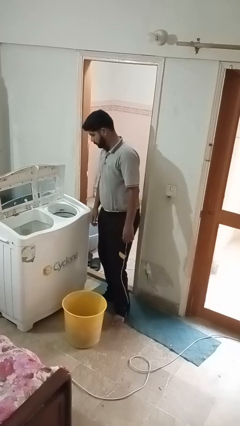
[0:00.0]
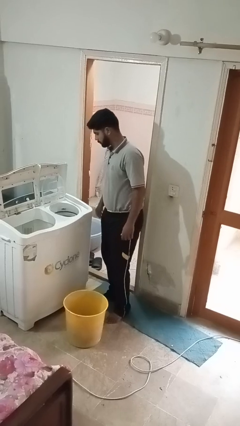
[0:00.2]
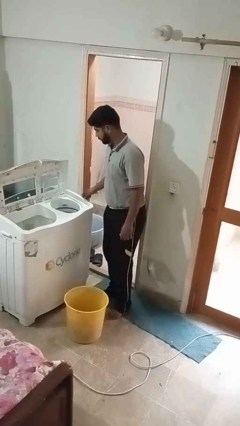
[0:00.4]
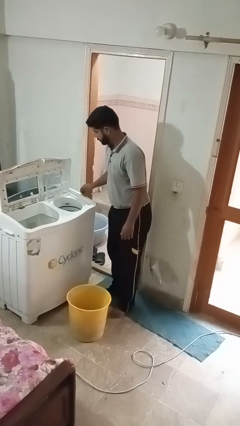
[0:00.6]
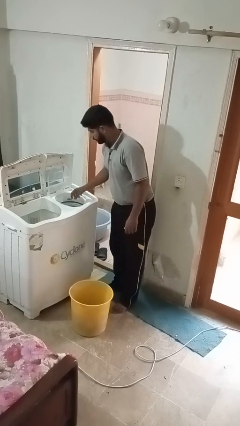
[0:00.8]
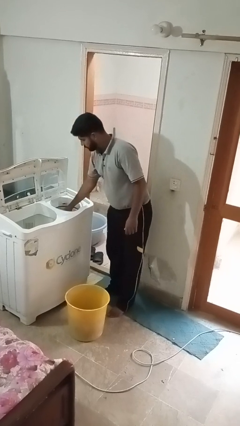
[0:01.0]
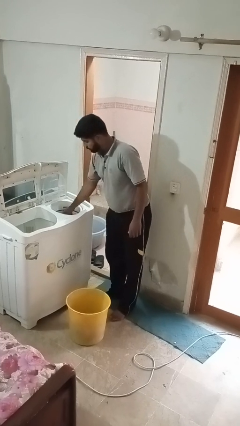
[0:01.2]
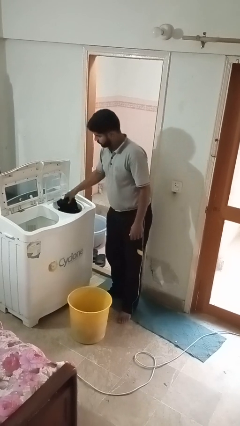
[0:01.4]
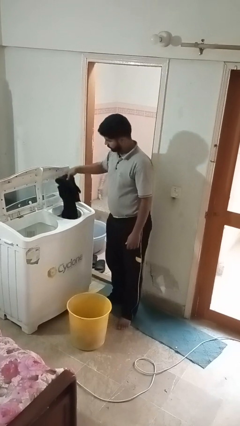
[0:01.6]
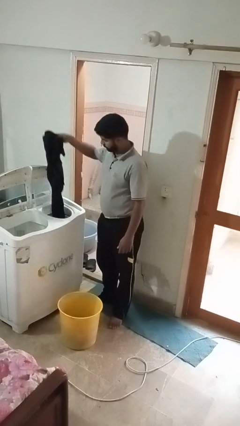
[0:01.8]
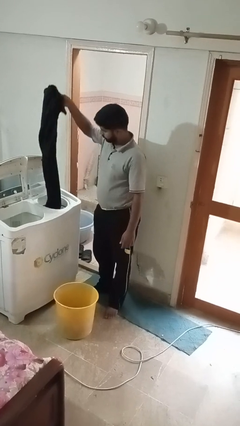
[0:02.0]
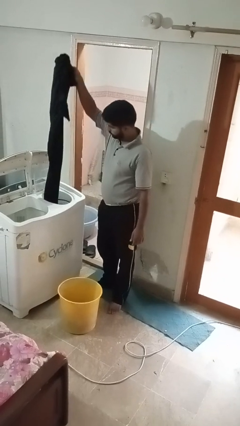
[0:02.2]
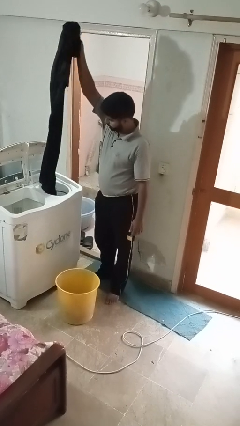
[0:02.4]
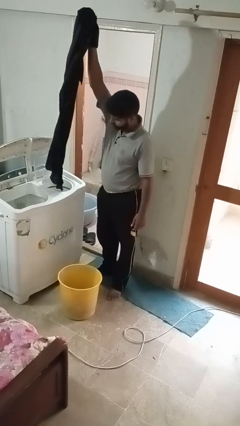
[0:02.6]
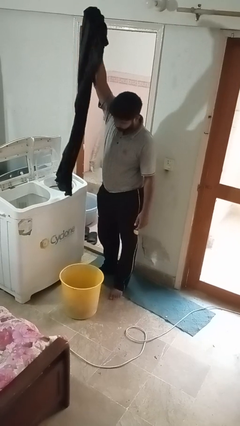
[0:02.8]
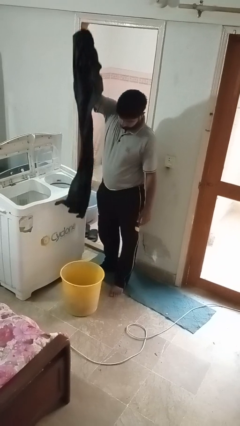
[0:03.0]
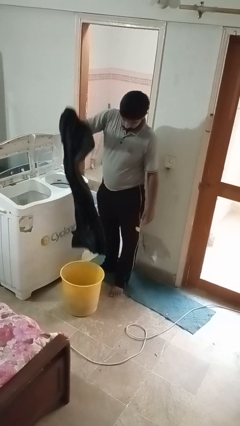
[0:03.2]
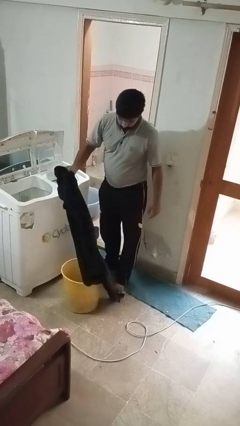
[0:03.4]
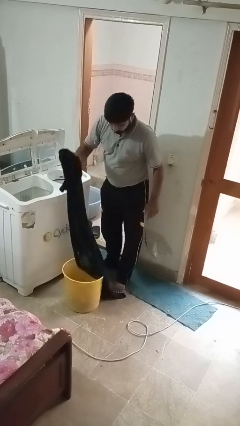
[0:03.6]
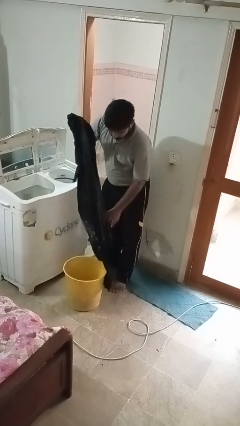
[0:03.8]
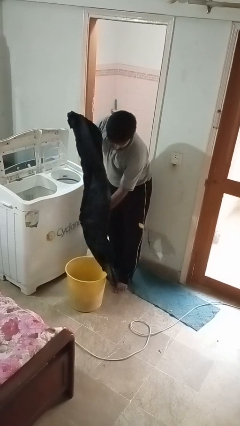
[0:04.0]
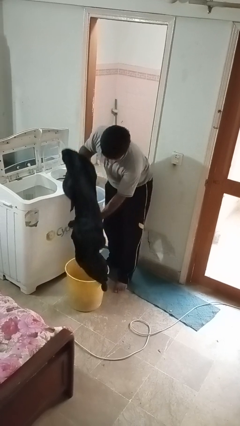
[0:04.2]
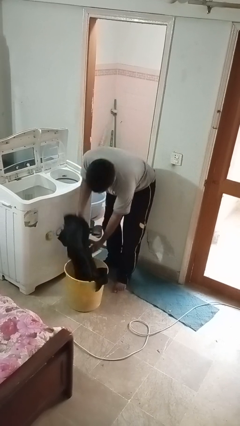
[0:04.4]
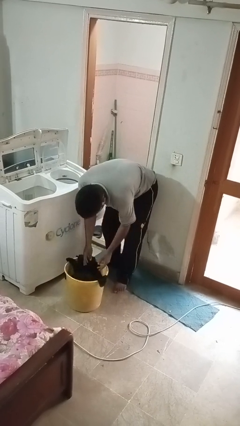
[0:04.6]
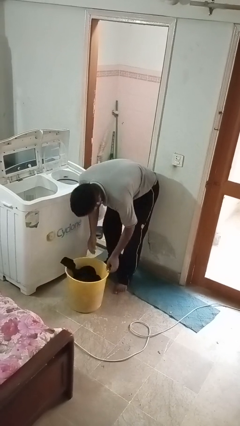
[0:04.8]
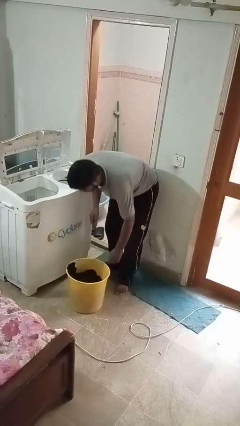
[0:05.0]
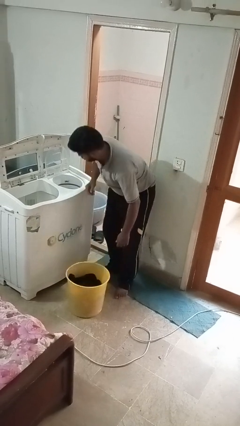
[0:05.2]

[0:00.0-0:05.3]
person unloads dryer

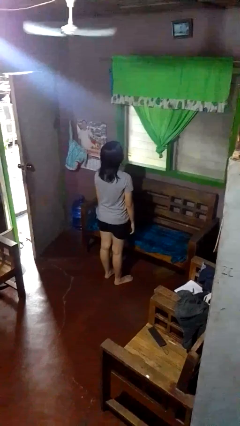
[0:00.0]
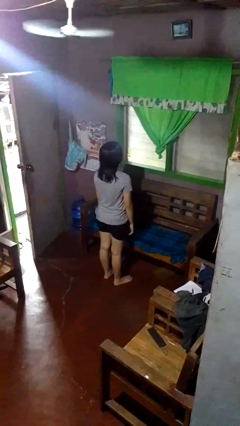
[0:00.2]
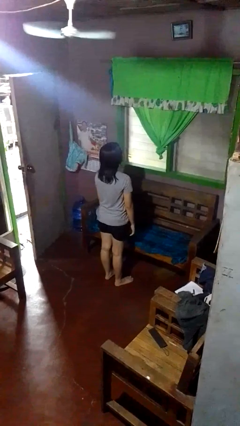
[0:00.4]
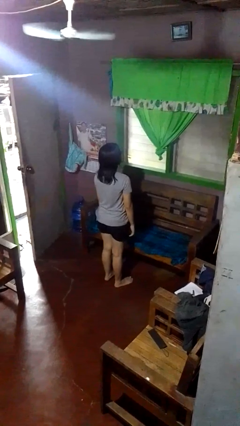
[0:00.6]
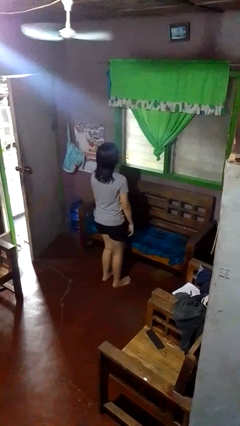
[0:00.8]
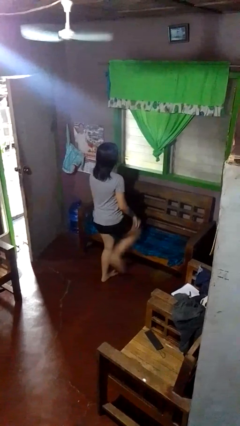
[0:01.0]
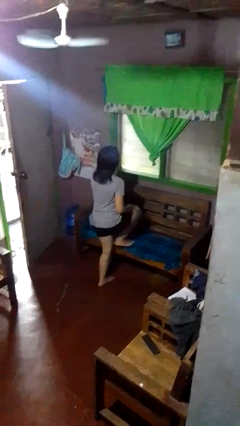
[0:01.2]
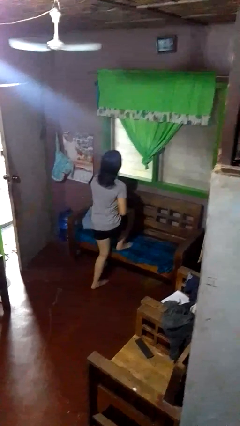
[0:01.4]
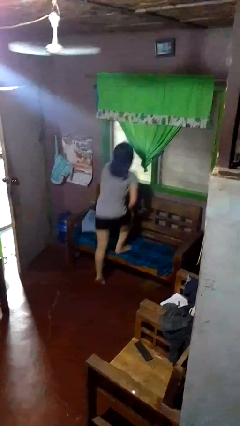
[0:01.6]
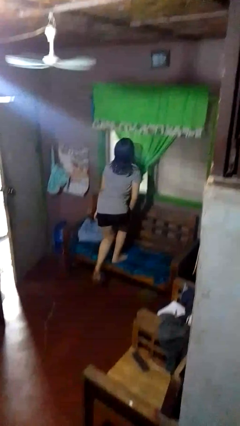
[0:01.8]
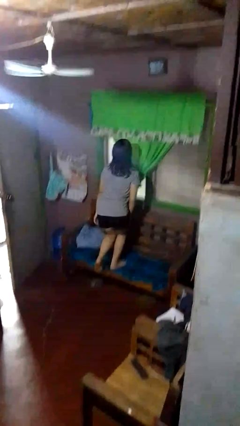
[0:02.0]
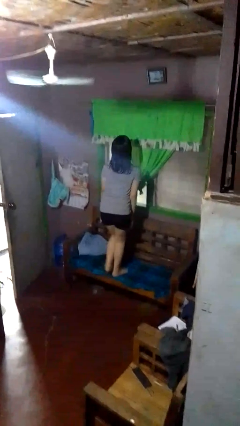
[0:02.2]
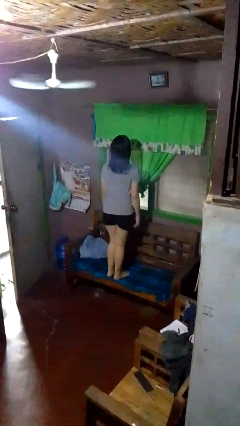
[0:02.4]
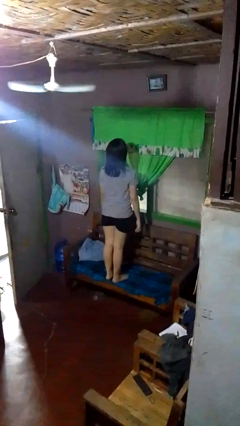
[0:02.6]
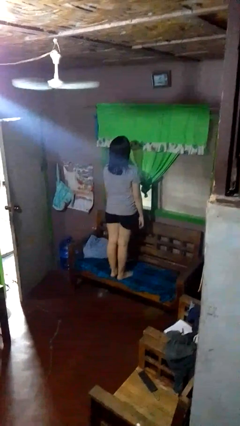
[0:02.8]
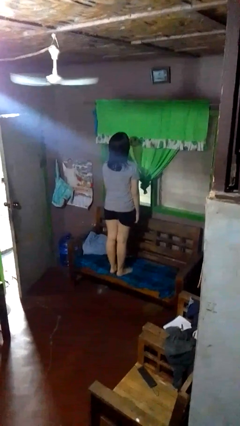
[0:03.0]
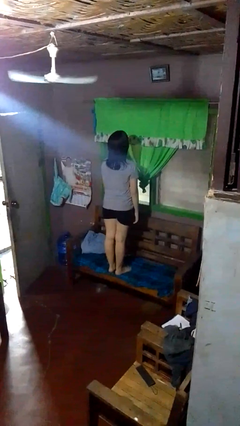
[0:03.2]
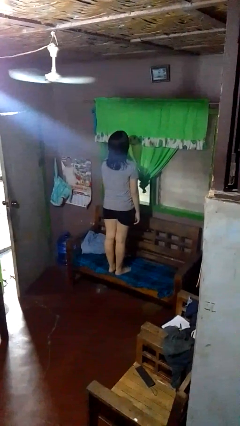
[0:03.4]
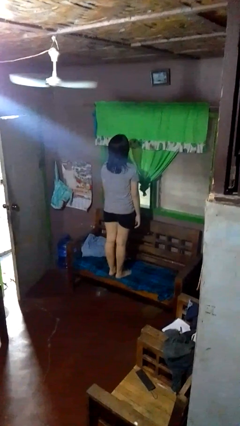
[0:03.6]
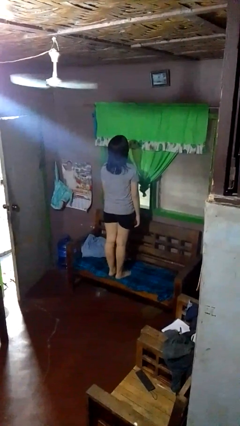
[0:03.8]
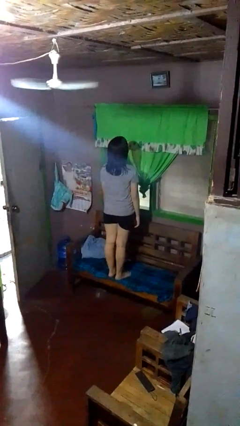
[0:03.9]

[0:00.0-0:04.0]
person climbs on couch

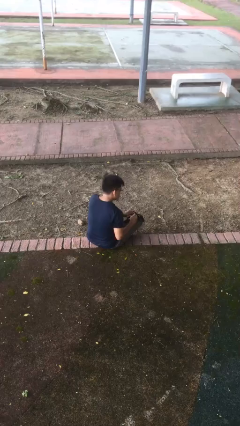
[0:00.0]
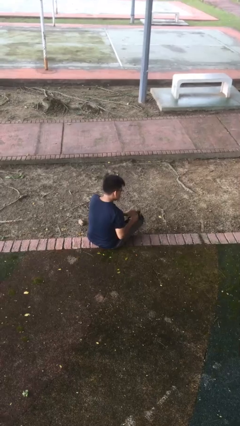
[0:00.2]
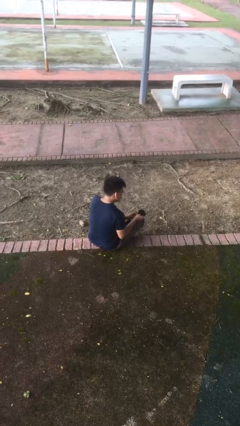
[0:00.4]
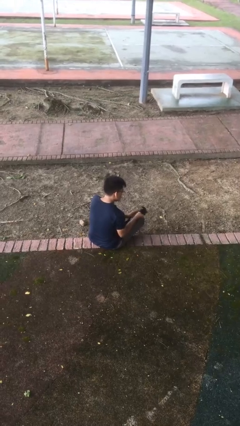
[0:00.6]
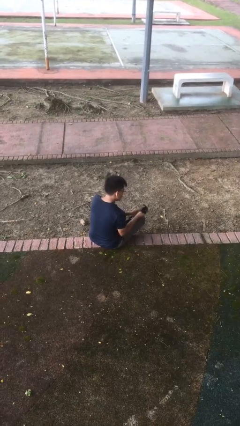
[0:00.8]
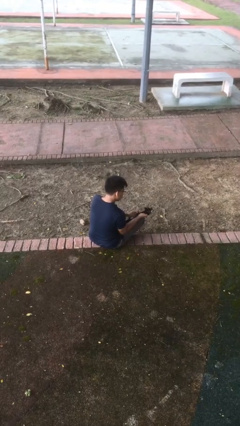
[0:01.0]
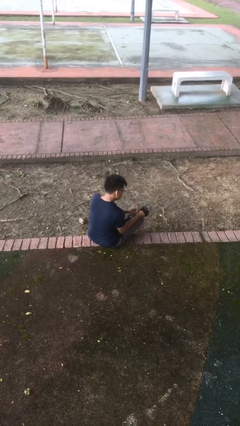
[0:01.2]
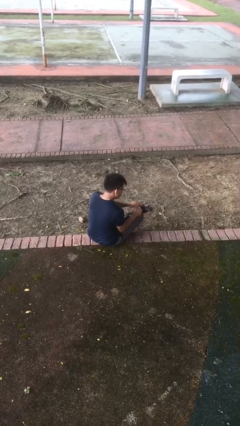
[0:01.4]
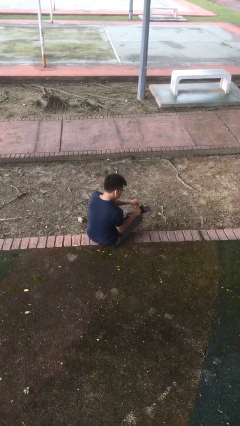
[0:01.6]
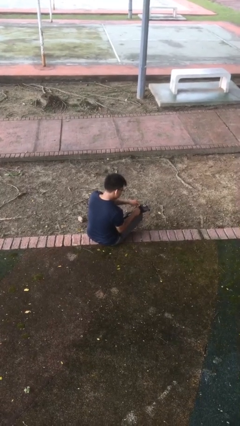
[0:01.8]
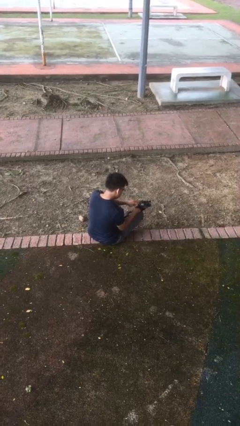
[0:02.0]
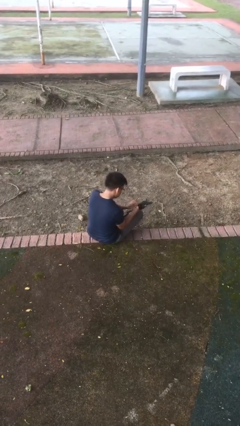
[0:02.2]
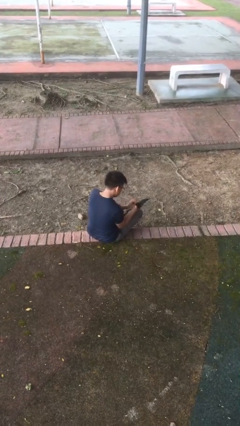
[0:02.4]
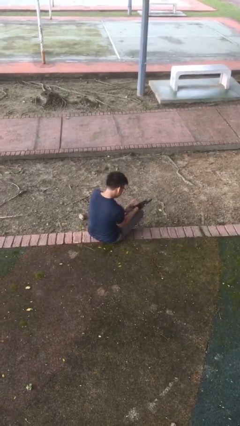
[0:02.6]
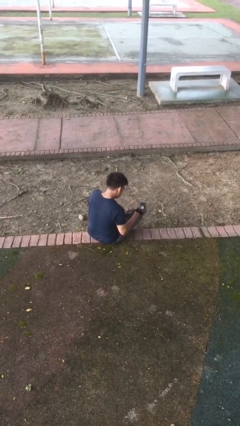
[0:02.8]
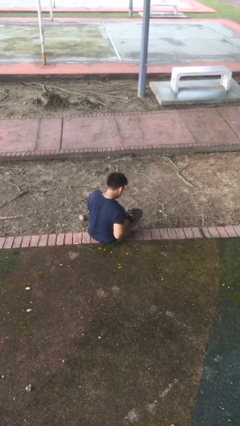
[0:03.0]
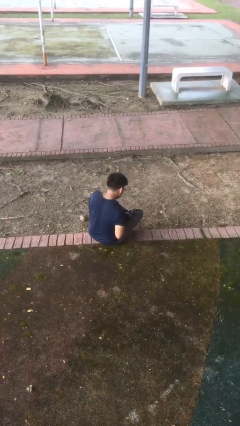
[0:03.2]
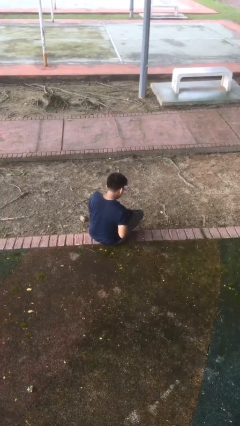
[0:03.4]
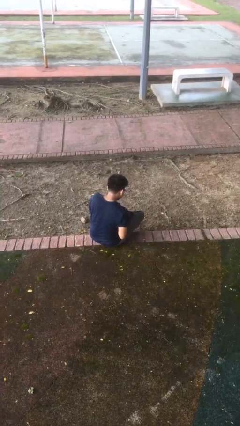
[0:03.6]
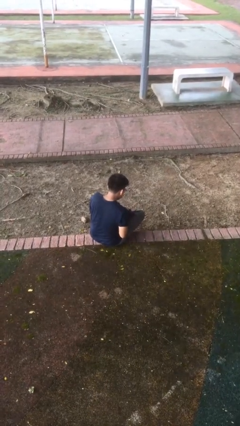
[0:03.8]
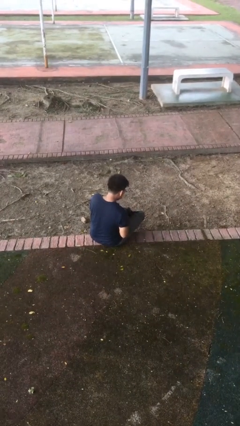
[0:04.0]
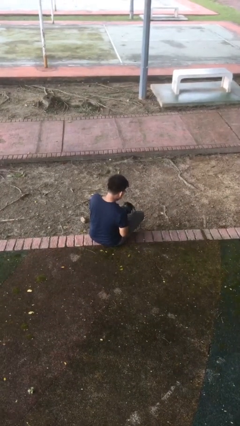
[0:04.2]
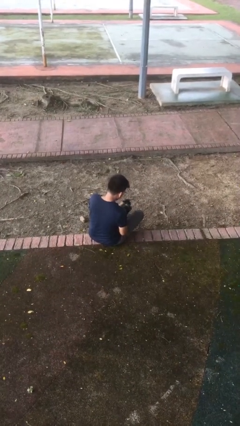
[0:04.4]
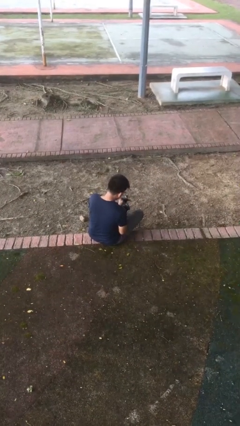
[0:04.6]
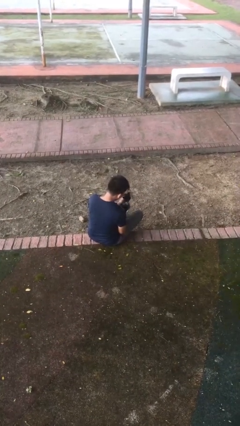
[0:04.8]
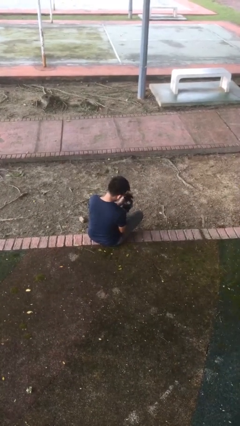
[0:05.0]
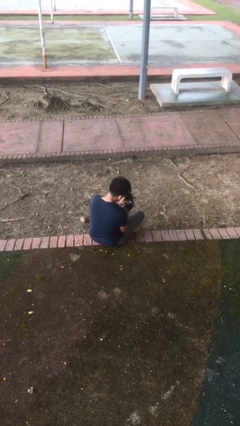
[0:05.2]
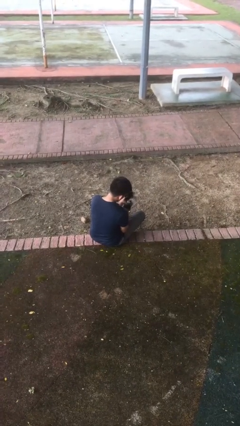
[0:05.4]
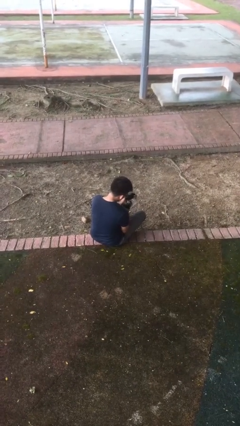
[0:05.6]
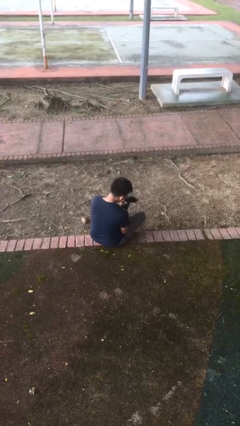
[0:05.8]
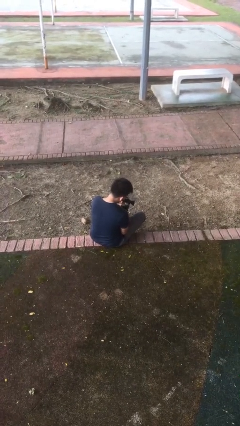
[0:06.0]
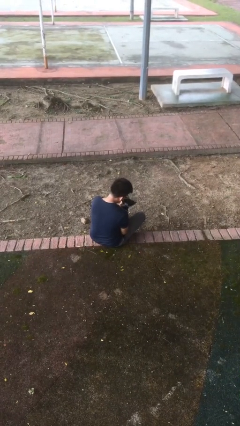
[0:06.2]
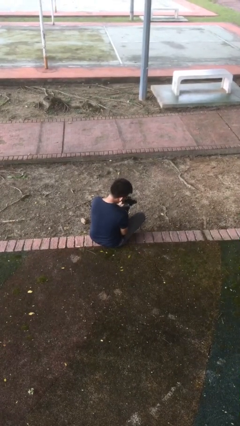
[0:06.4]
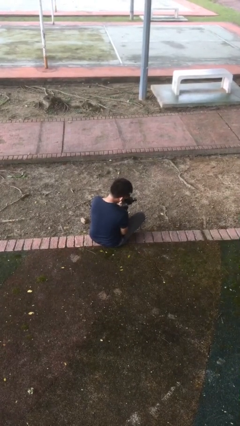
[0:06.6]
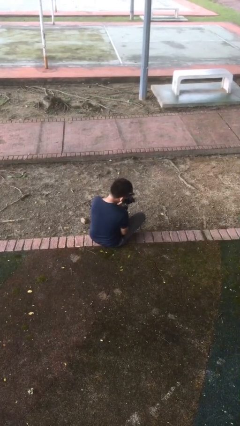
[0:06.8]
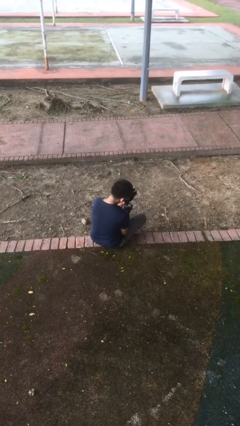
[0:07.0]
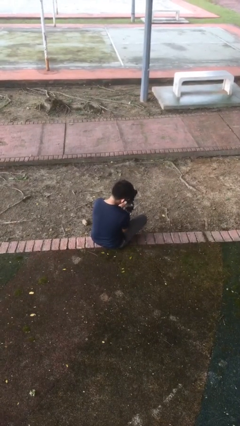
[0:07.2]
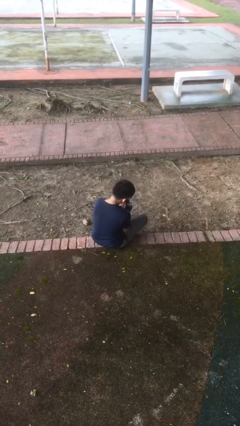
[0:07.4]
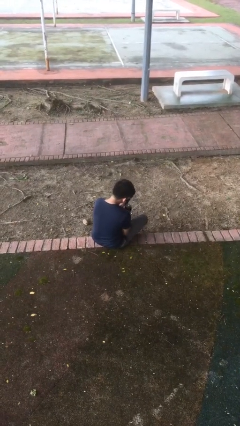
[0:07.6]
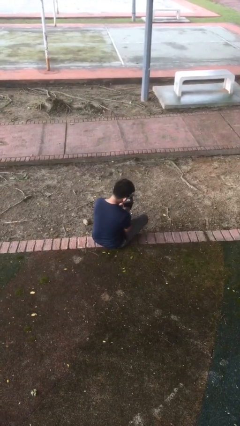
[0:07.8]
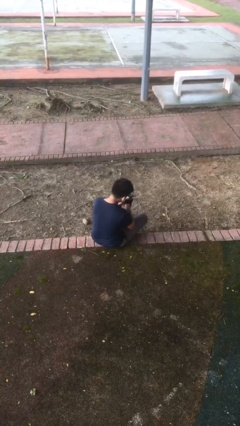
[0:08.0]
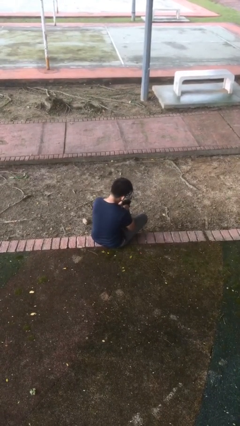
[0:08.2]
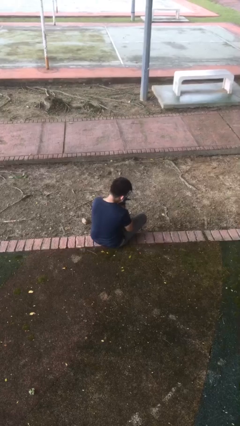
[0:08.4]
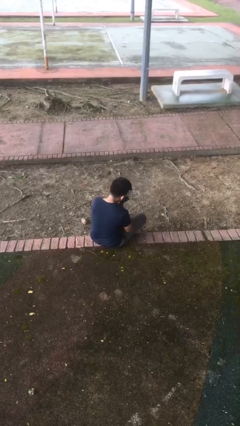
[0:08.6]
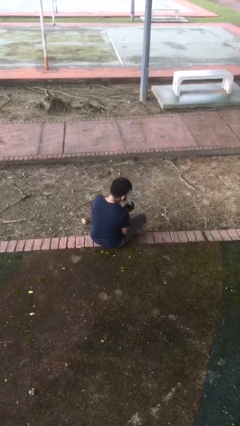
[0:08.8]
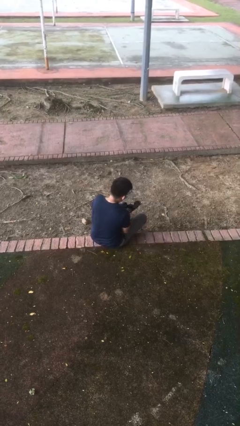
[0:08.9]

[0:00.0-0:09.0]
person puts on gloves
